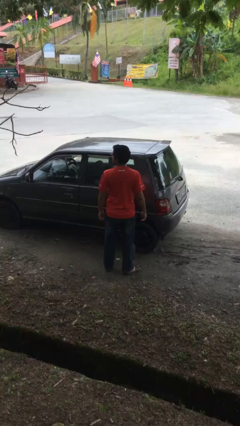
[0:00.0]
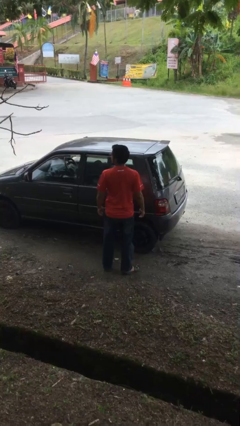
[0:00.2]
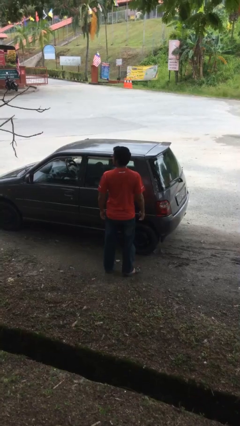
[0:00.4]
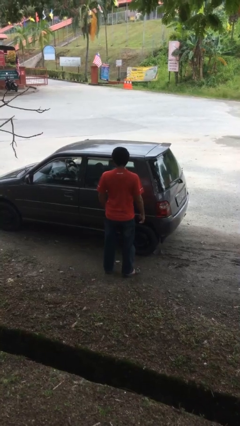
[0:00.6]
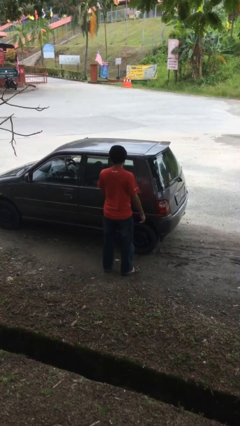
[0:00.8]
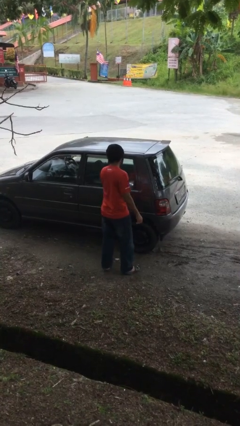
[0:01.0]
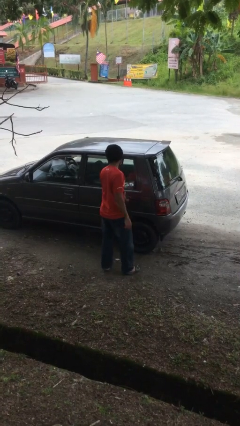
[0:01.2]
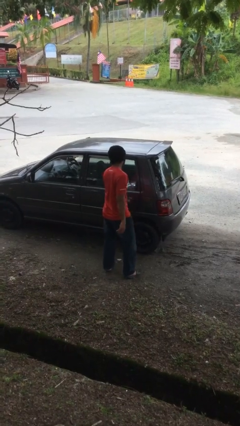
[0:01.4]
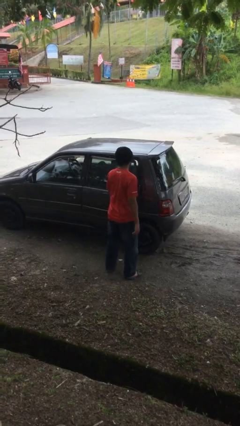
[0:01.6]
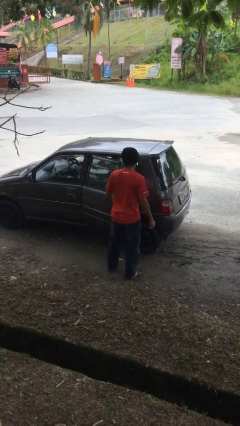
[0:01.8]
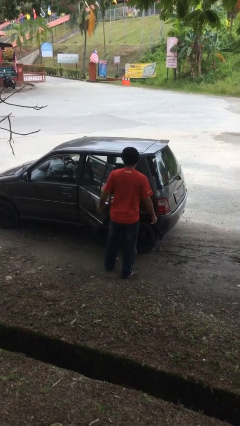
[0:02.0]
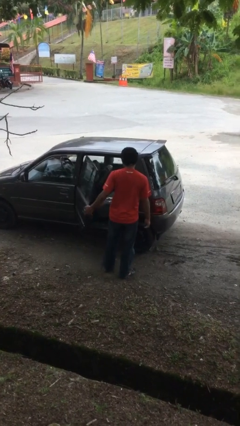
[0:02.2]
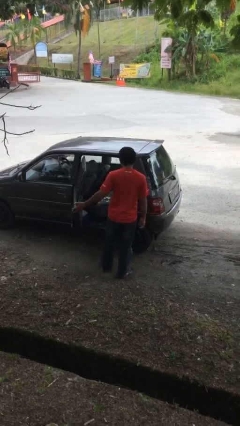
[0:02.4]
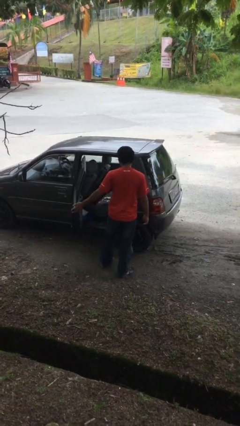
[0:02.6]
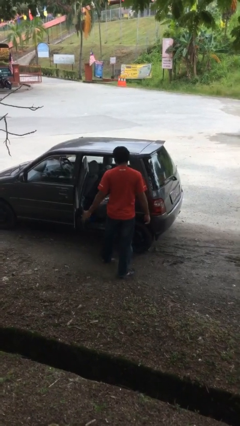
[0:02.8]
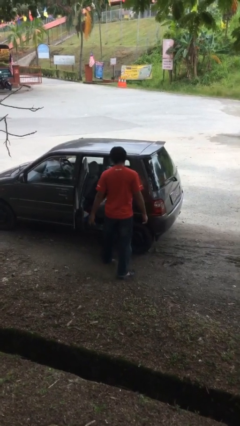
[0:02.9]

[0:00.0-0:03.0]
person opens car door

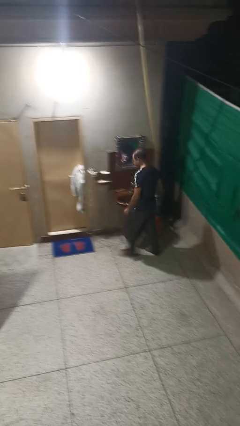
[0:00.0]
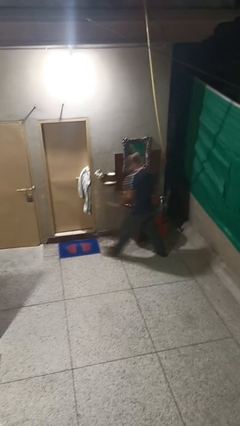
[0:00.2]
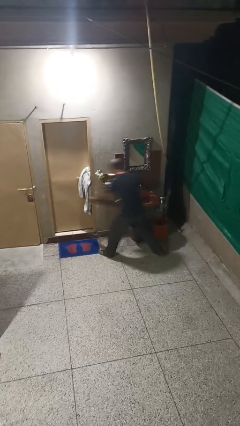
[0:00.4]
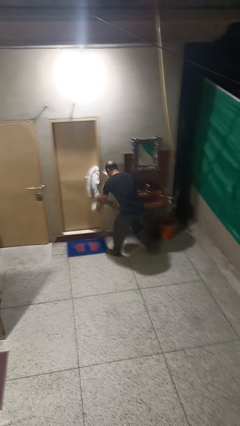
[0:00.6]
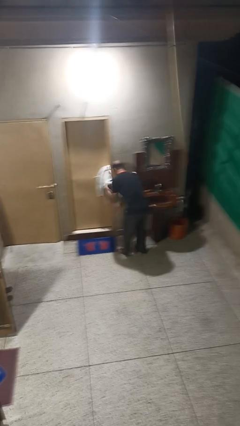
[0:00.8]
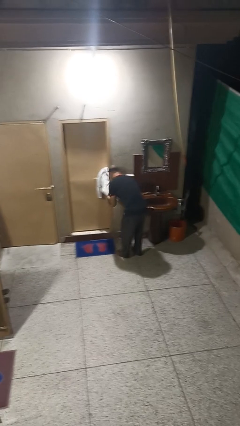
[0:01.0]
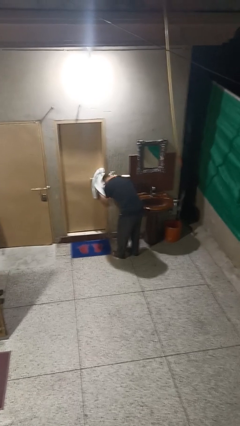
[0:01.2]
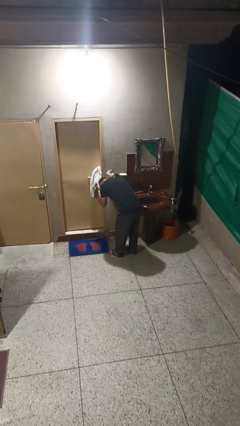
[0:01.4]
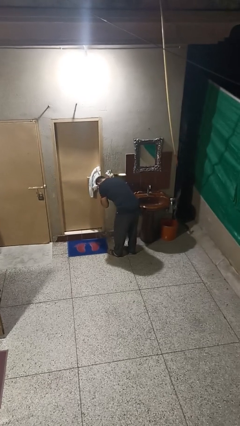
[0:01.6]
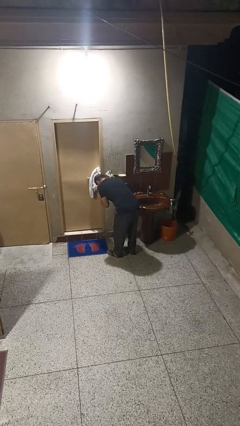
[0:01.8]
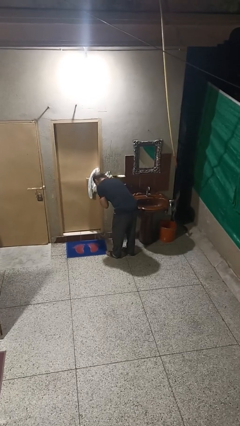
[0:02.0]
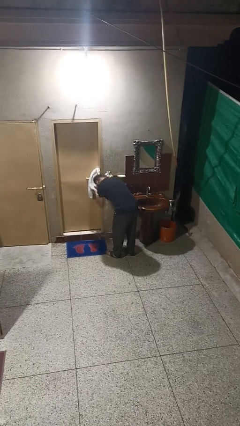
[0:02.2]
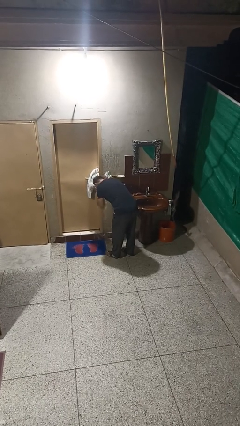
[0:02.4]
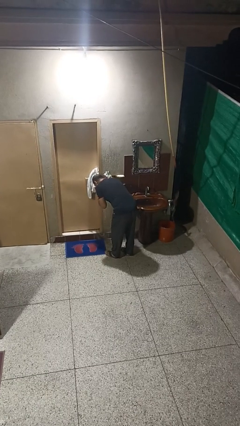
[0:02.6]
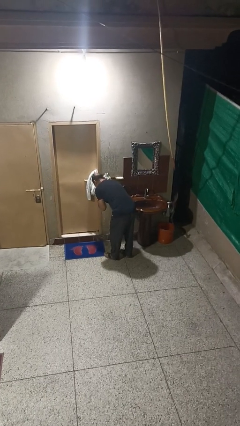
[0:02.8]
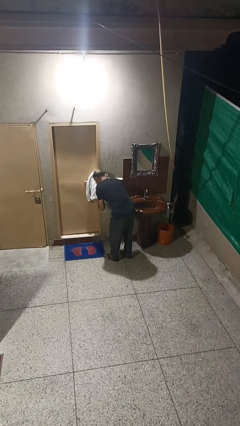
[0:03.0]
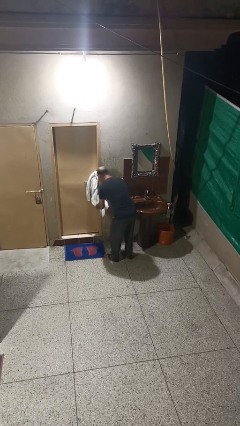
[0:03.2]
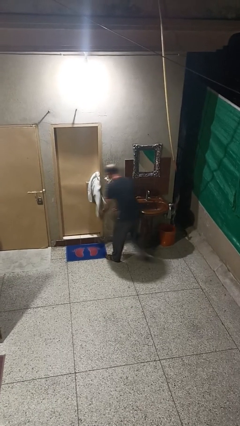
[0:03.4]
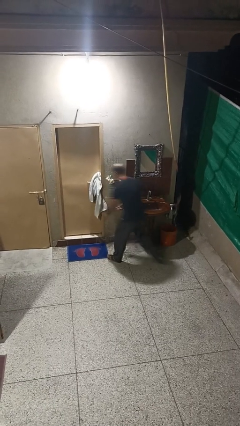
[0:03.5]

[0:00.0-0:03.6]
person dries face with towel

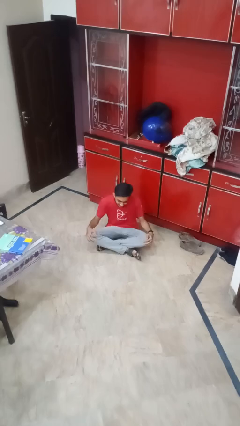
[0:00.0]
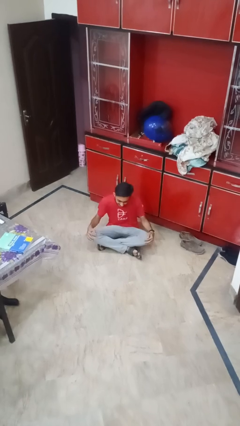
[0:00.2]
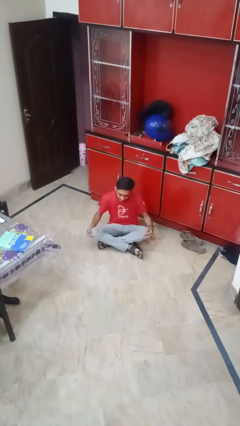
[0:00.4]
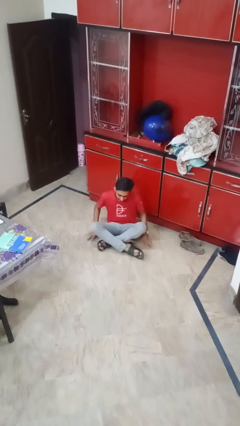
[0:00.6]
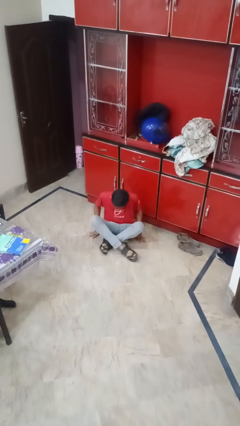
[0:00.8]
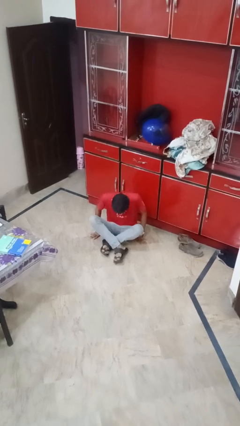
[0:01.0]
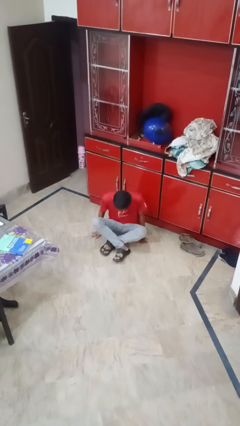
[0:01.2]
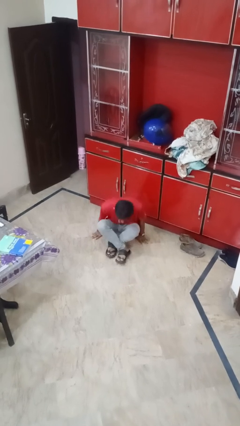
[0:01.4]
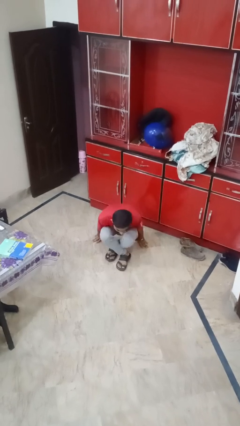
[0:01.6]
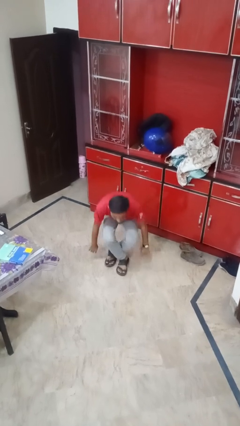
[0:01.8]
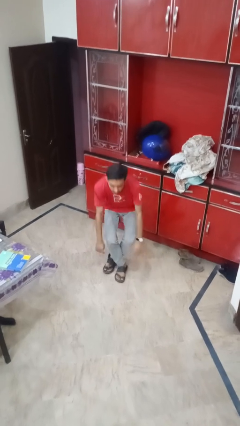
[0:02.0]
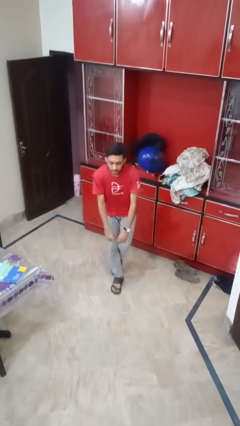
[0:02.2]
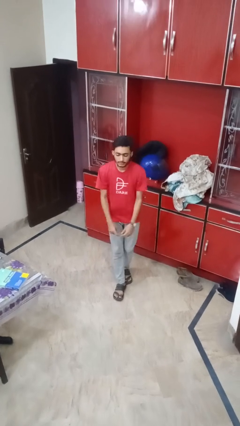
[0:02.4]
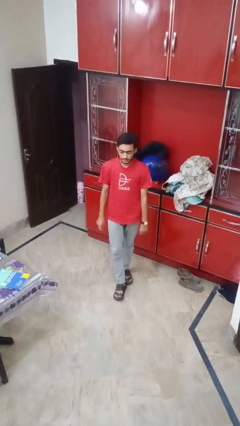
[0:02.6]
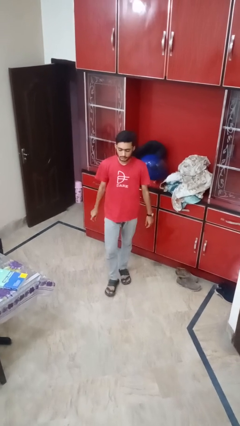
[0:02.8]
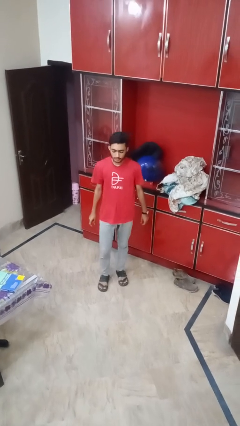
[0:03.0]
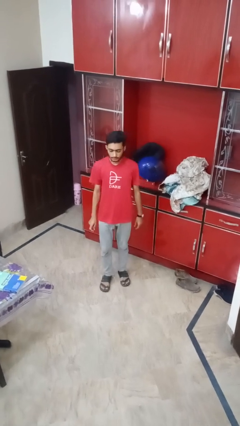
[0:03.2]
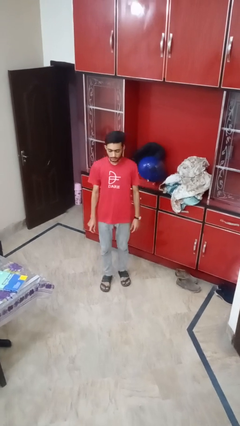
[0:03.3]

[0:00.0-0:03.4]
person stands up from floor

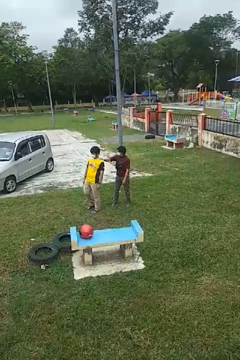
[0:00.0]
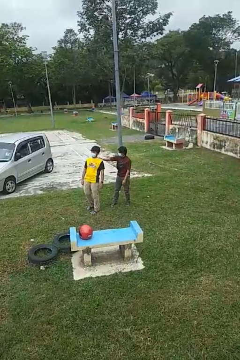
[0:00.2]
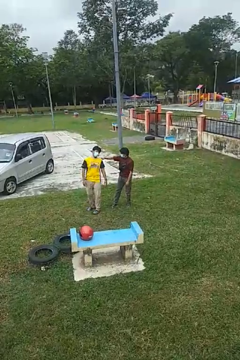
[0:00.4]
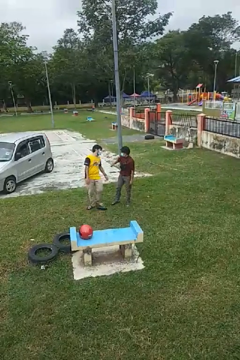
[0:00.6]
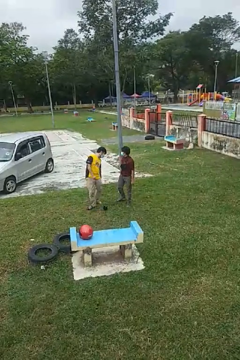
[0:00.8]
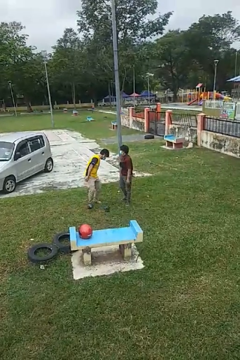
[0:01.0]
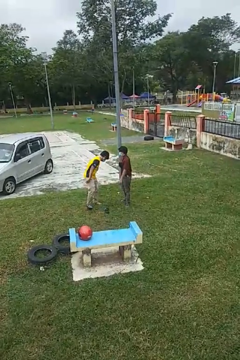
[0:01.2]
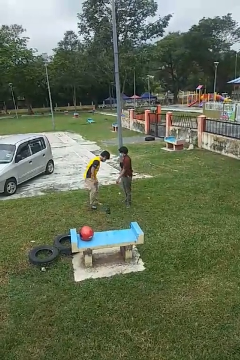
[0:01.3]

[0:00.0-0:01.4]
person spins person around

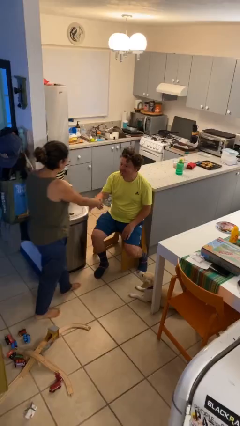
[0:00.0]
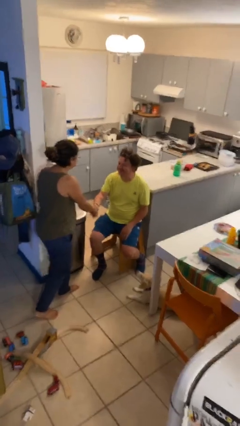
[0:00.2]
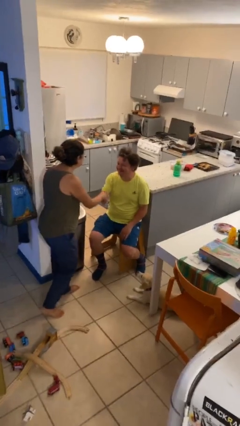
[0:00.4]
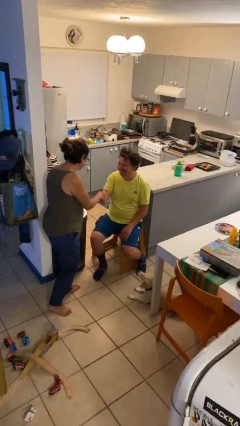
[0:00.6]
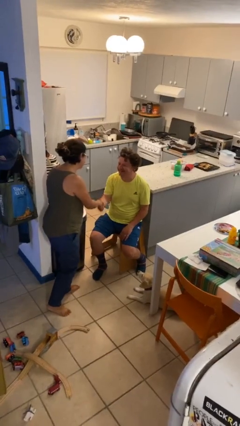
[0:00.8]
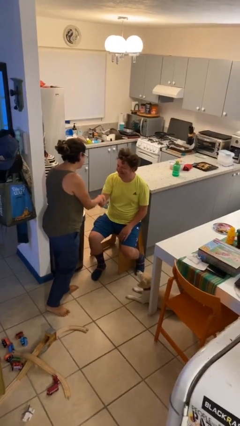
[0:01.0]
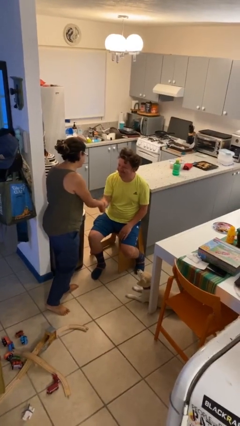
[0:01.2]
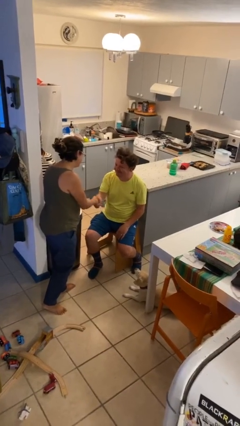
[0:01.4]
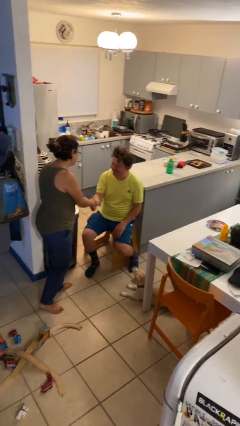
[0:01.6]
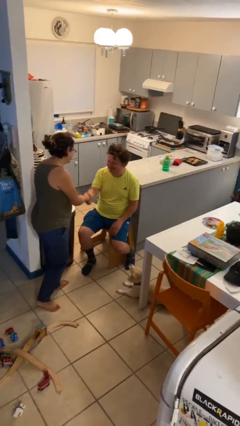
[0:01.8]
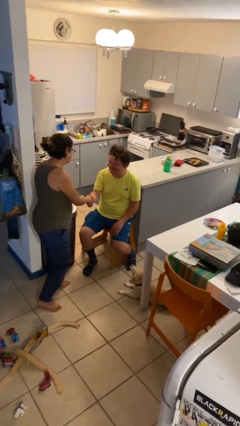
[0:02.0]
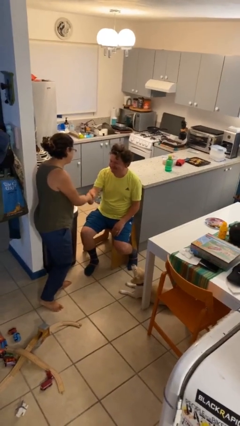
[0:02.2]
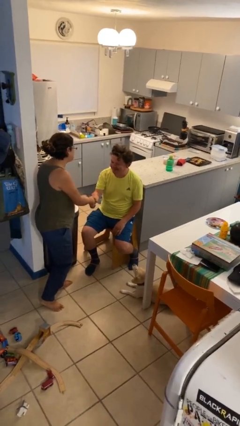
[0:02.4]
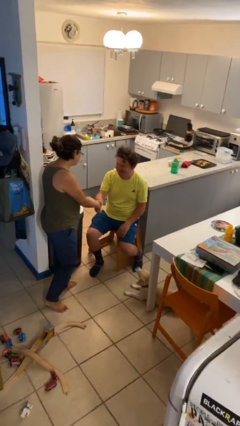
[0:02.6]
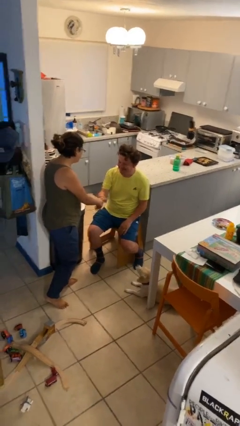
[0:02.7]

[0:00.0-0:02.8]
person shakes hand

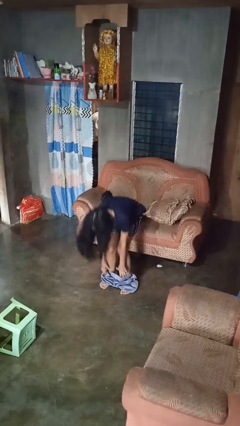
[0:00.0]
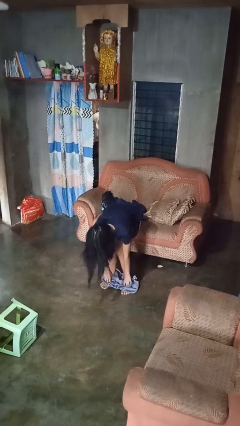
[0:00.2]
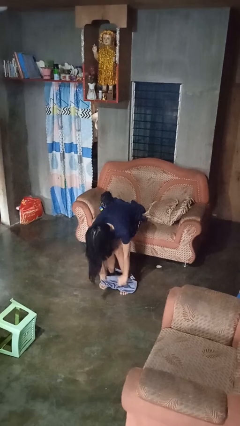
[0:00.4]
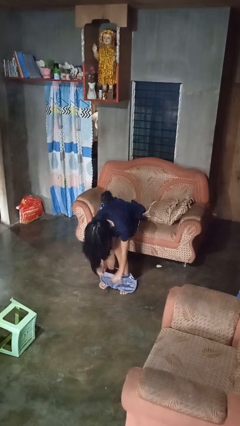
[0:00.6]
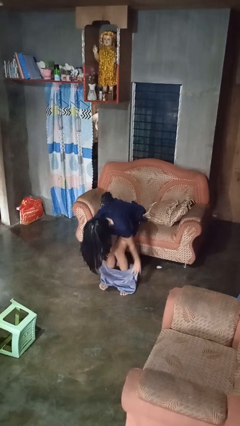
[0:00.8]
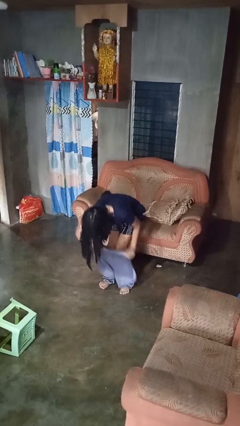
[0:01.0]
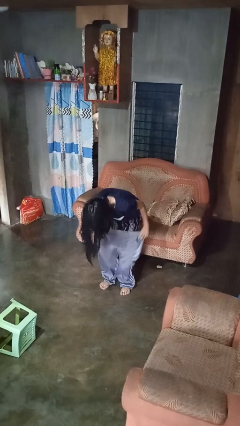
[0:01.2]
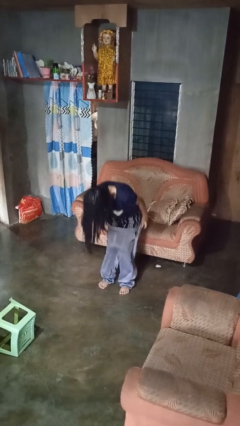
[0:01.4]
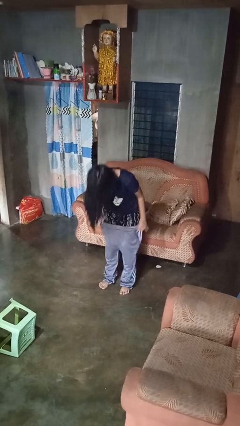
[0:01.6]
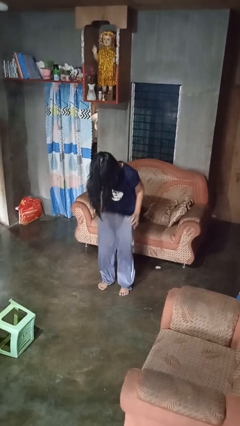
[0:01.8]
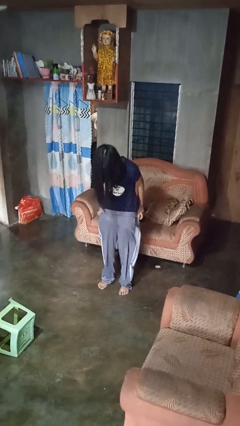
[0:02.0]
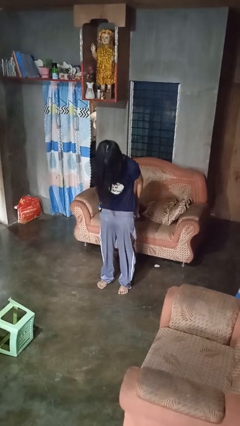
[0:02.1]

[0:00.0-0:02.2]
person puts on pants

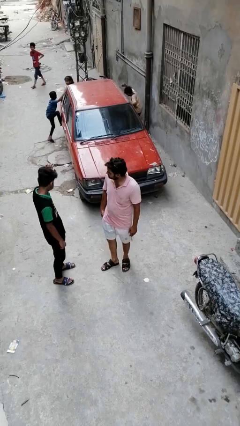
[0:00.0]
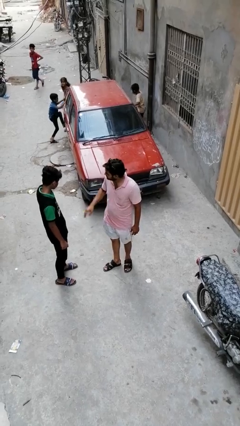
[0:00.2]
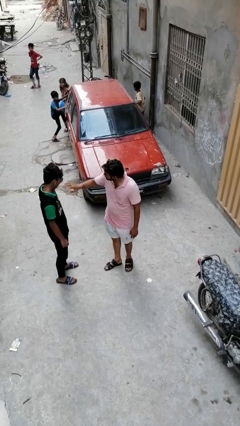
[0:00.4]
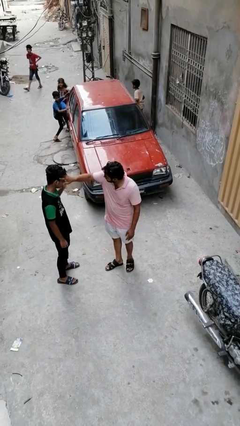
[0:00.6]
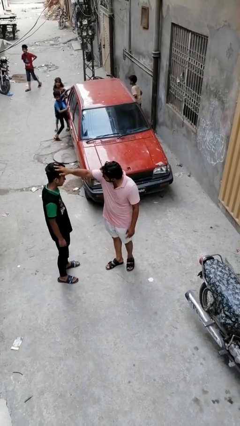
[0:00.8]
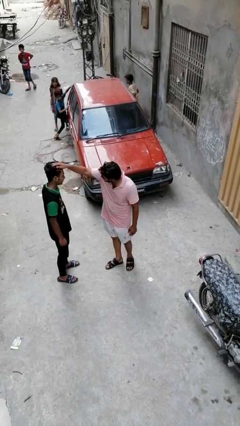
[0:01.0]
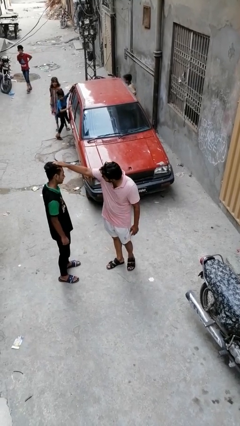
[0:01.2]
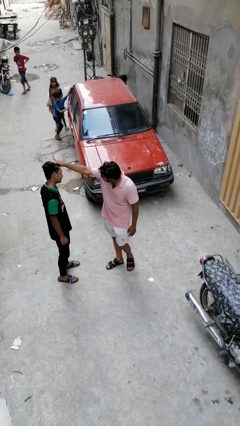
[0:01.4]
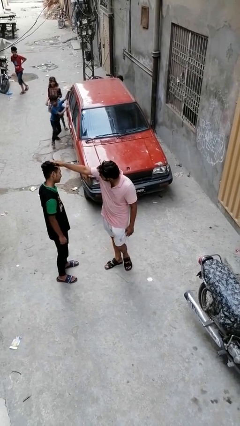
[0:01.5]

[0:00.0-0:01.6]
person grabs person by hair
